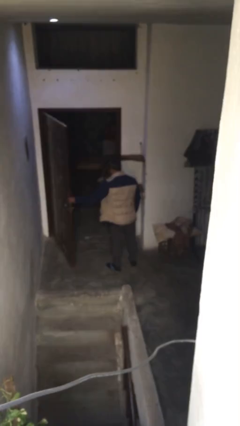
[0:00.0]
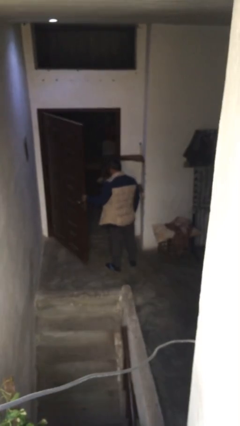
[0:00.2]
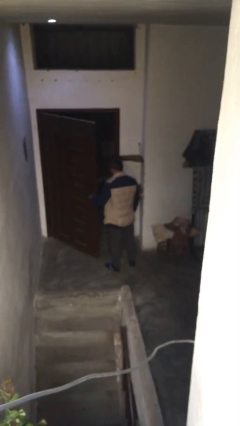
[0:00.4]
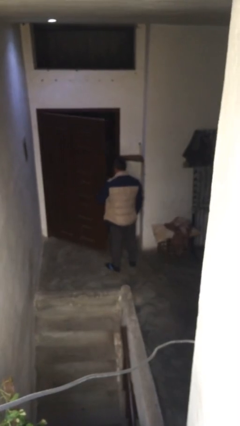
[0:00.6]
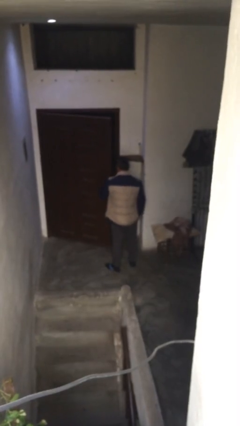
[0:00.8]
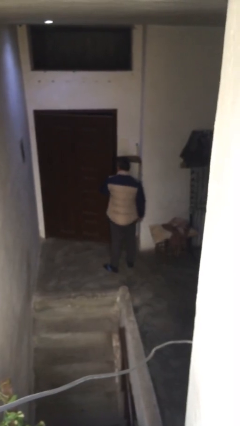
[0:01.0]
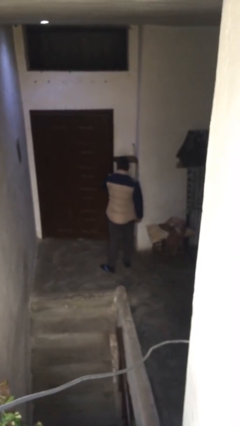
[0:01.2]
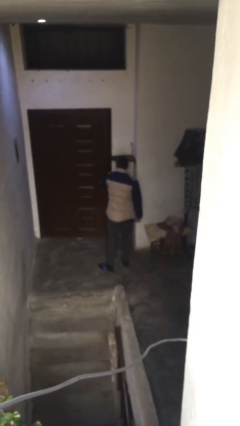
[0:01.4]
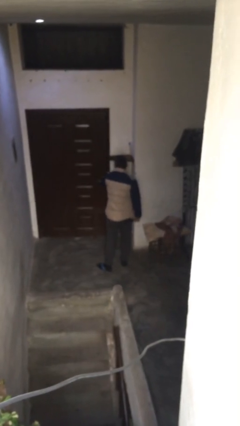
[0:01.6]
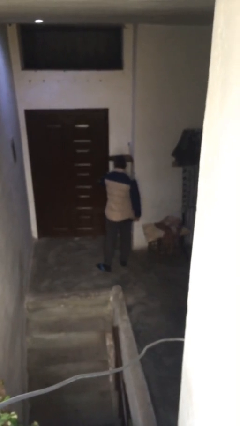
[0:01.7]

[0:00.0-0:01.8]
person closes facility door

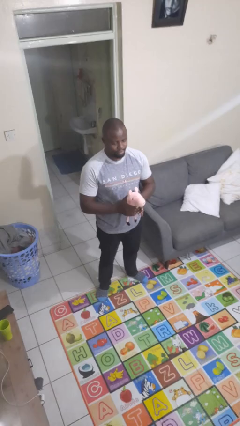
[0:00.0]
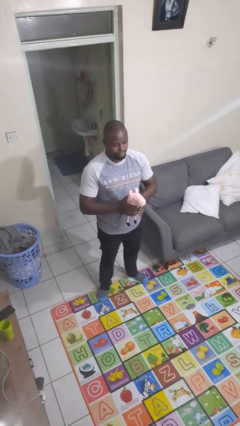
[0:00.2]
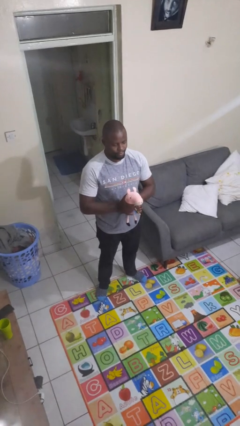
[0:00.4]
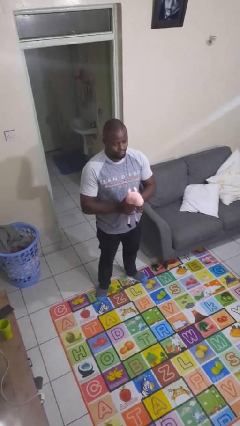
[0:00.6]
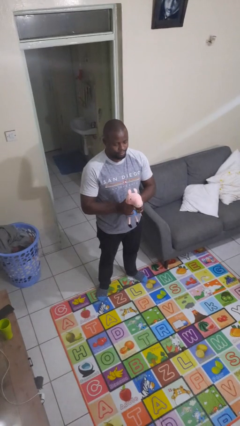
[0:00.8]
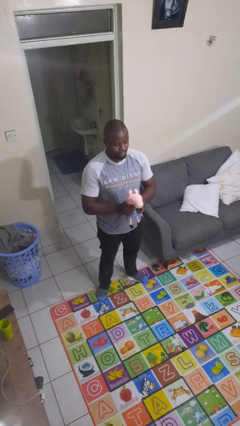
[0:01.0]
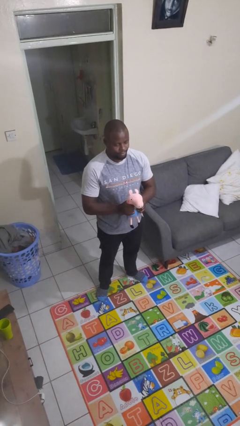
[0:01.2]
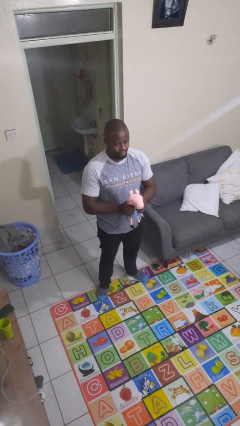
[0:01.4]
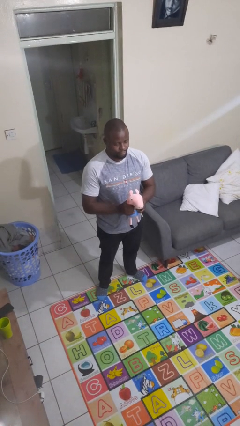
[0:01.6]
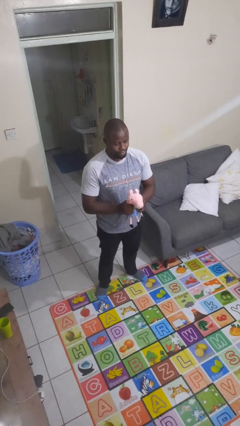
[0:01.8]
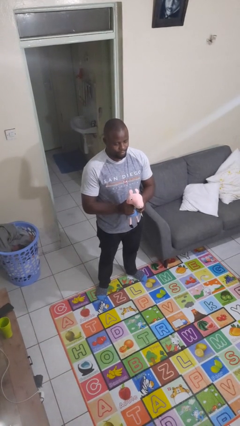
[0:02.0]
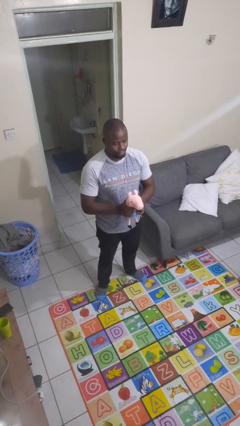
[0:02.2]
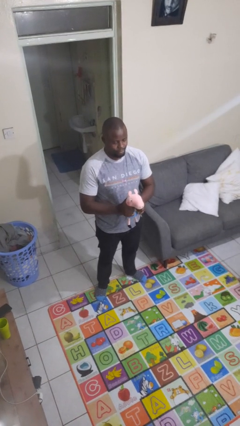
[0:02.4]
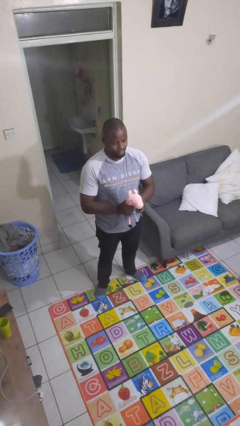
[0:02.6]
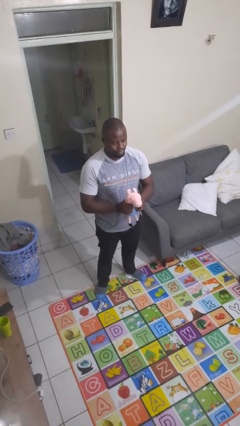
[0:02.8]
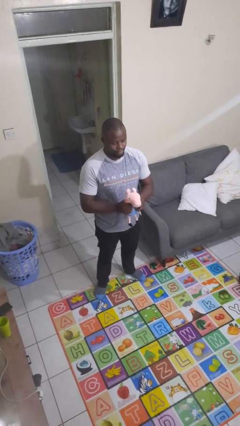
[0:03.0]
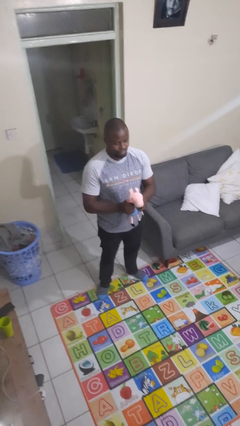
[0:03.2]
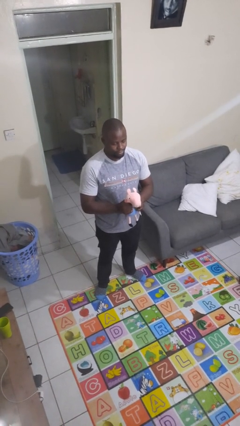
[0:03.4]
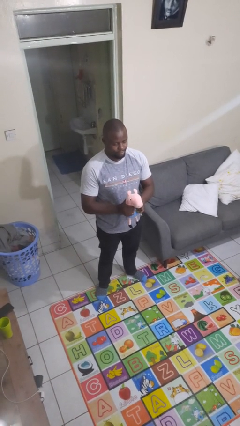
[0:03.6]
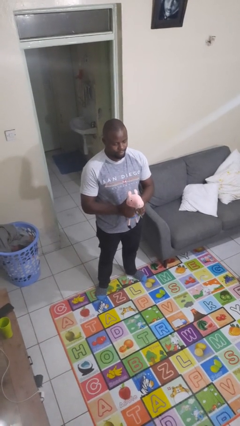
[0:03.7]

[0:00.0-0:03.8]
person squeezes object

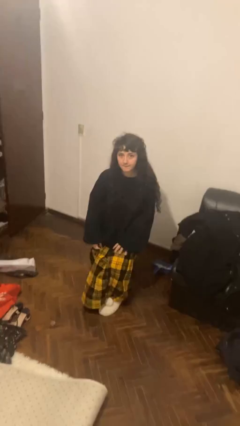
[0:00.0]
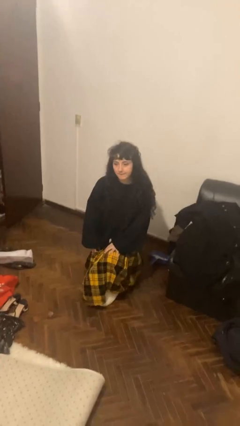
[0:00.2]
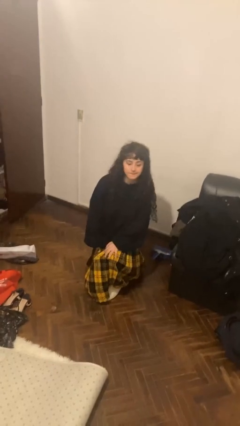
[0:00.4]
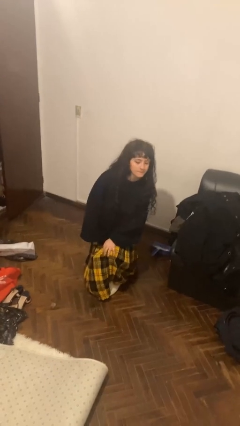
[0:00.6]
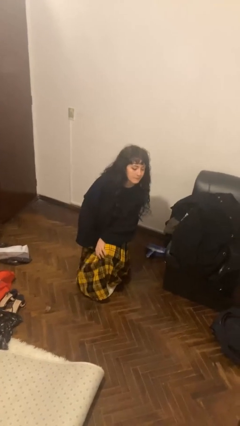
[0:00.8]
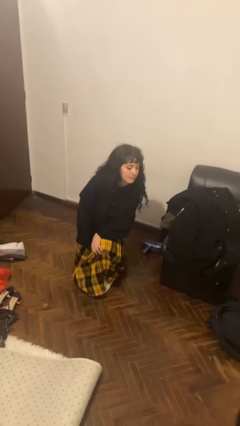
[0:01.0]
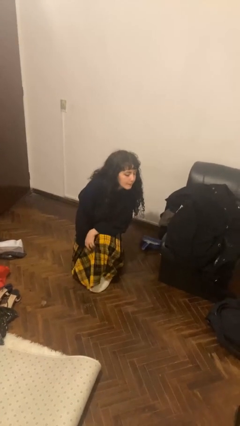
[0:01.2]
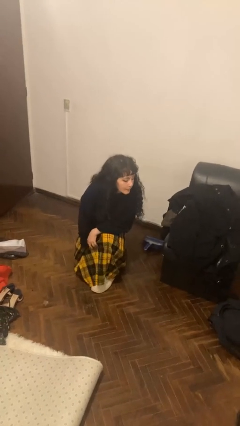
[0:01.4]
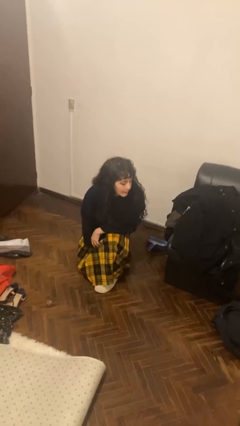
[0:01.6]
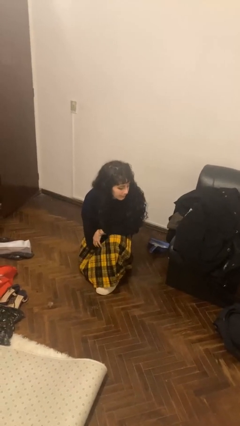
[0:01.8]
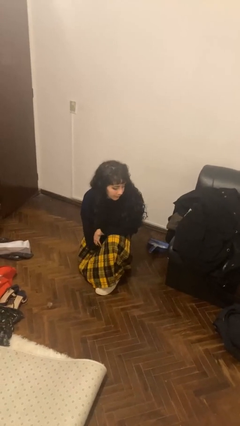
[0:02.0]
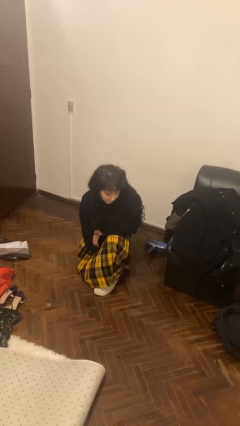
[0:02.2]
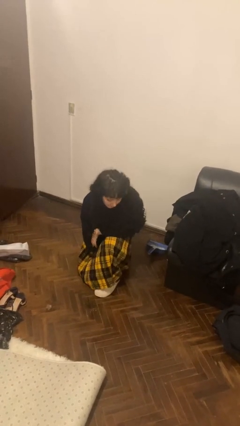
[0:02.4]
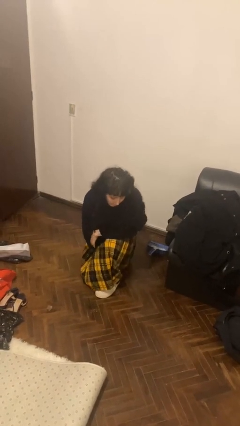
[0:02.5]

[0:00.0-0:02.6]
person kneels

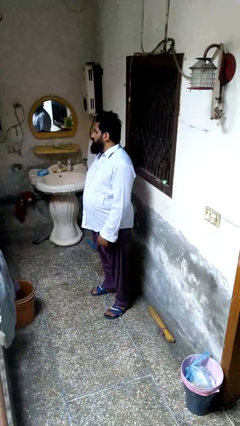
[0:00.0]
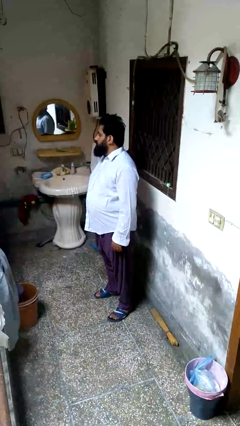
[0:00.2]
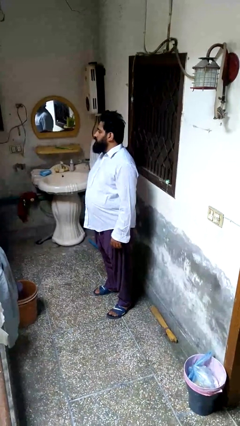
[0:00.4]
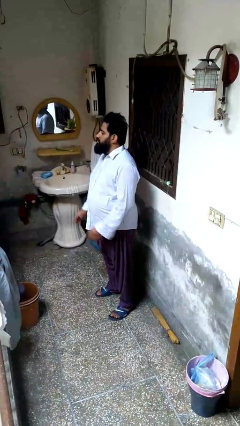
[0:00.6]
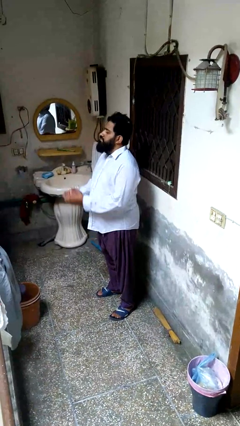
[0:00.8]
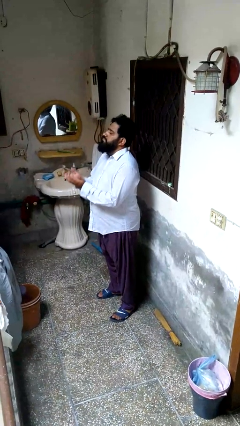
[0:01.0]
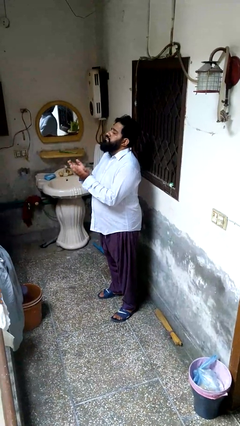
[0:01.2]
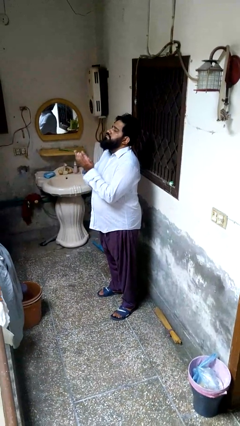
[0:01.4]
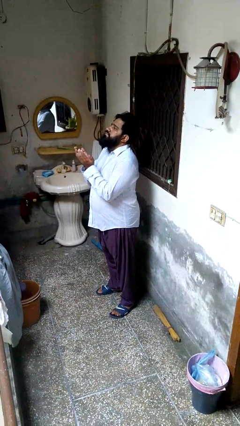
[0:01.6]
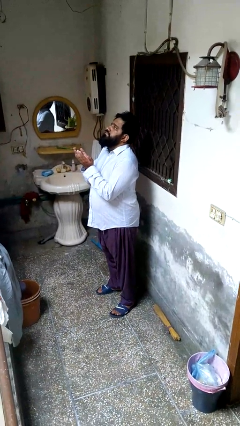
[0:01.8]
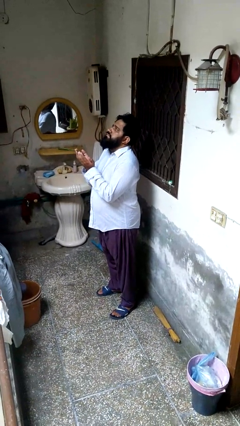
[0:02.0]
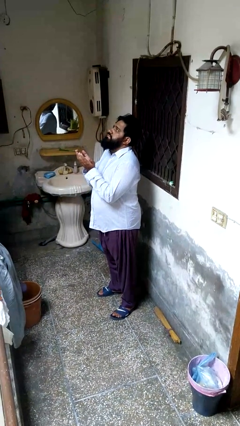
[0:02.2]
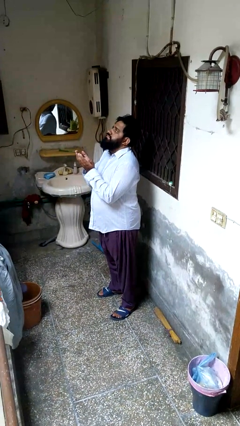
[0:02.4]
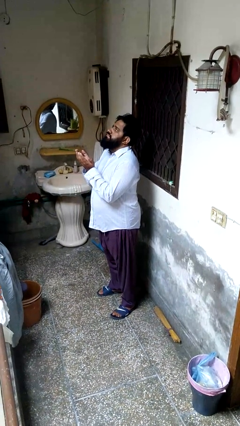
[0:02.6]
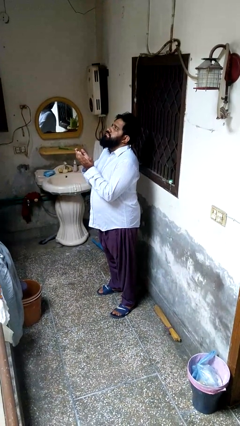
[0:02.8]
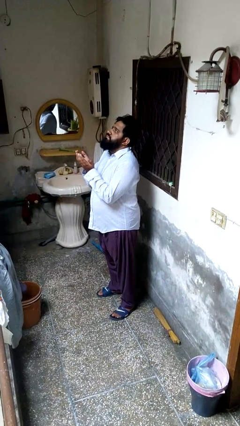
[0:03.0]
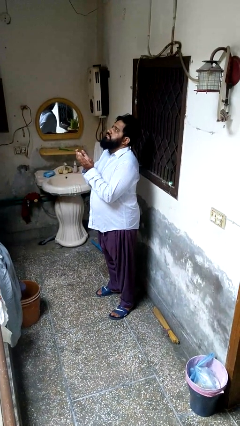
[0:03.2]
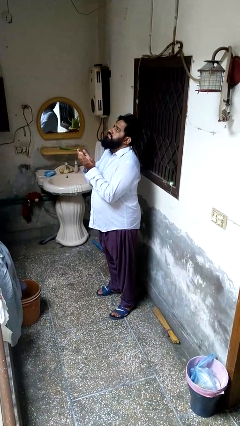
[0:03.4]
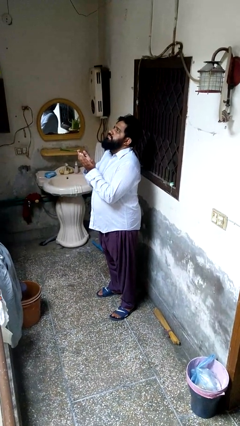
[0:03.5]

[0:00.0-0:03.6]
person prays

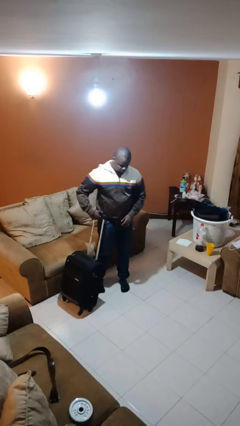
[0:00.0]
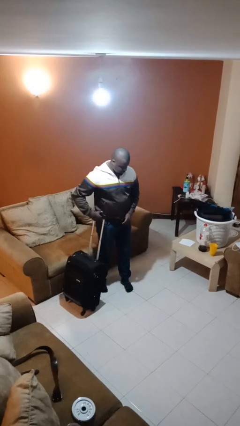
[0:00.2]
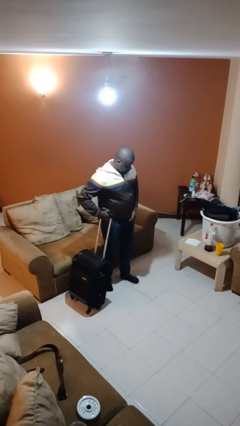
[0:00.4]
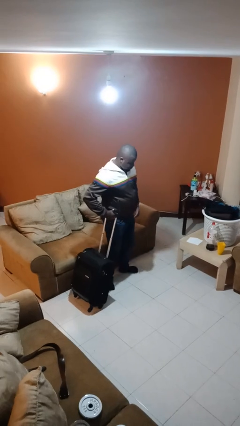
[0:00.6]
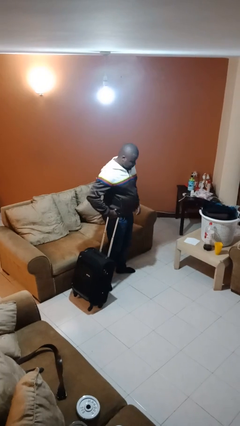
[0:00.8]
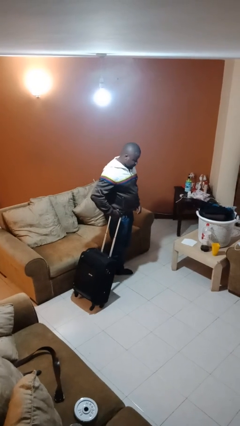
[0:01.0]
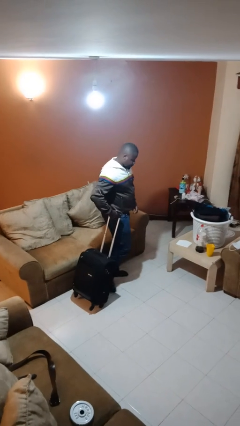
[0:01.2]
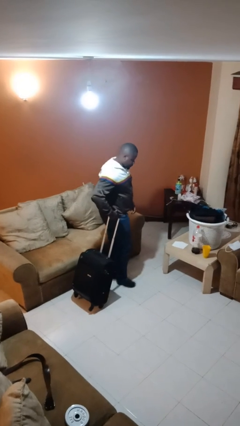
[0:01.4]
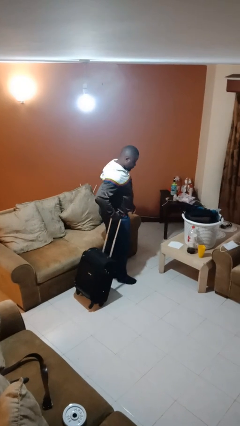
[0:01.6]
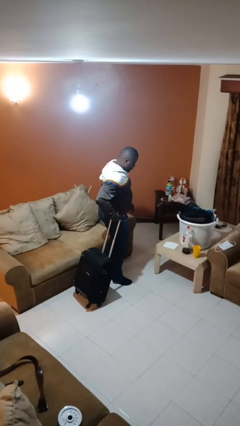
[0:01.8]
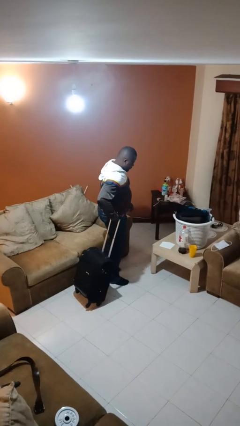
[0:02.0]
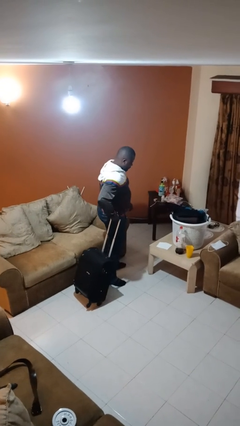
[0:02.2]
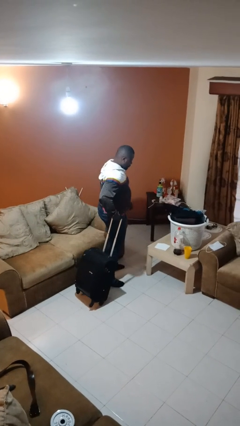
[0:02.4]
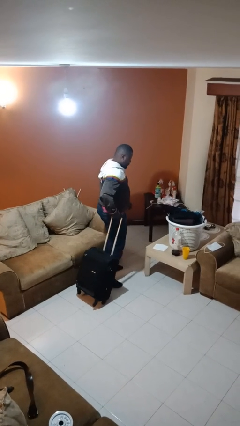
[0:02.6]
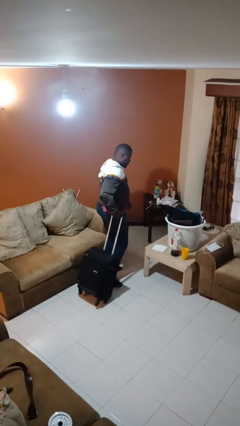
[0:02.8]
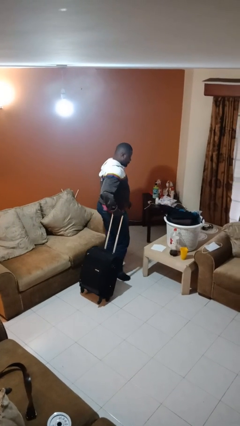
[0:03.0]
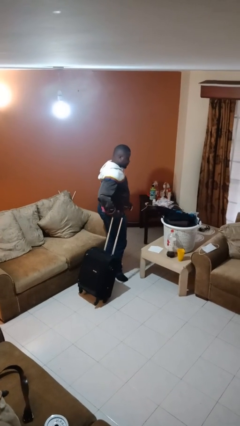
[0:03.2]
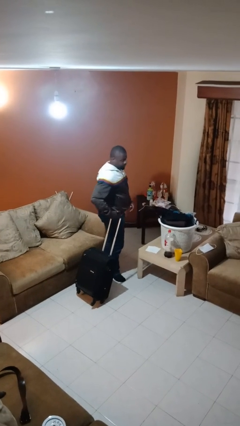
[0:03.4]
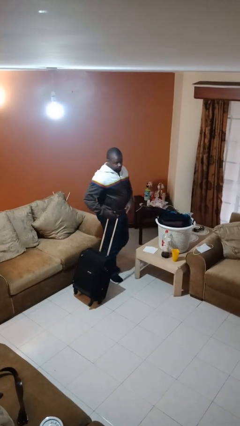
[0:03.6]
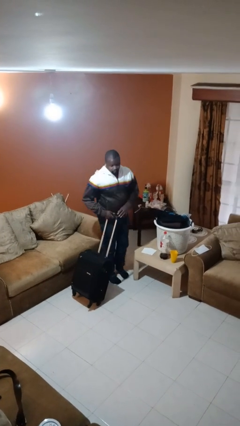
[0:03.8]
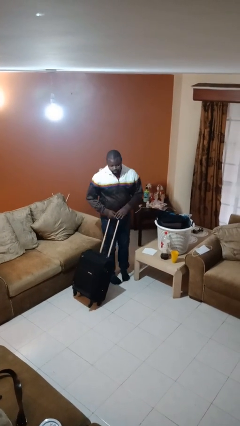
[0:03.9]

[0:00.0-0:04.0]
person pulls wheeled cart

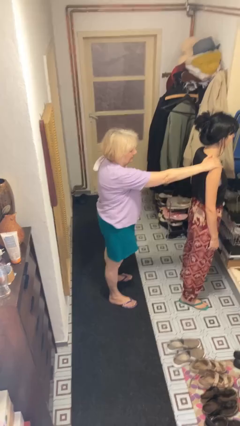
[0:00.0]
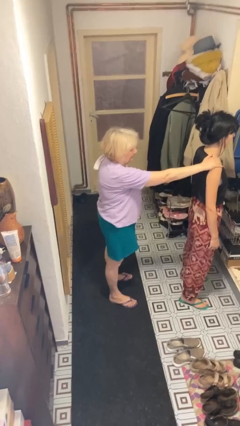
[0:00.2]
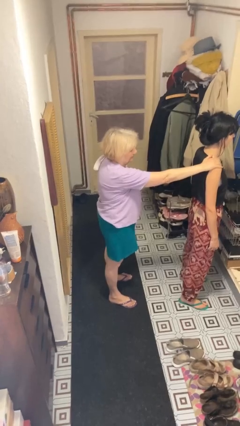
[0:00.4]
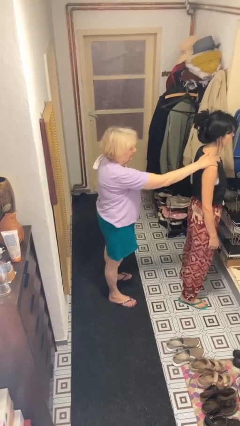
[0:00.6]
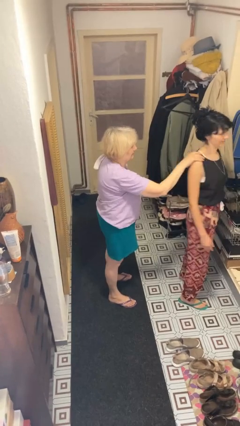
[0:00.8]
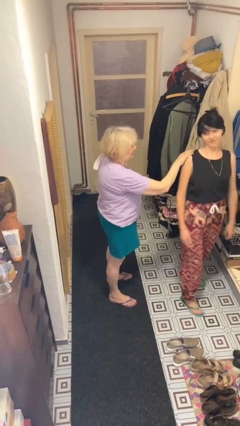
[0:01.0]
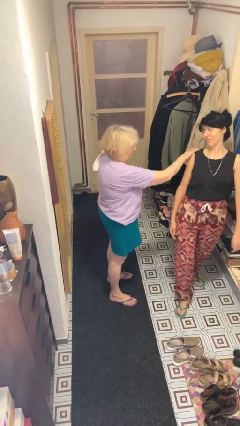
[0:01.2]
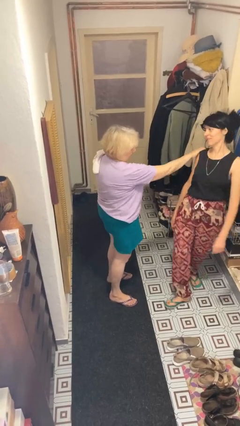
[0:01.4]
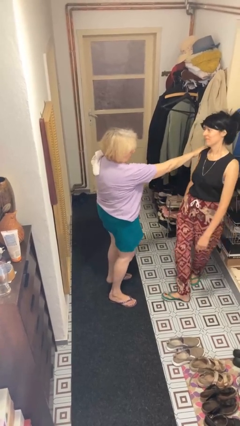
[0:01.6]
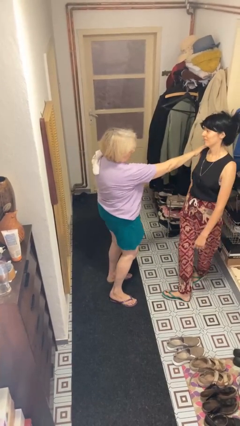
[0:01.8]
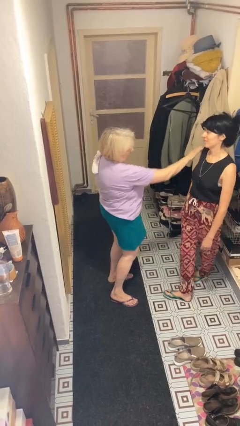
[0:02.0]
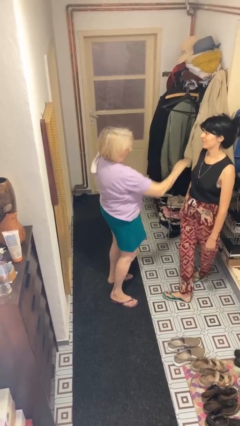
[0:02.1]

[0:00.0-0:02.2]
person spins person around
